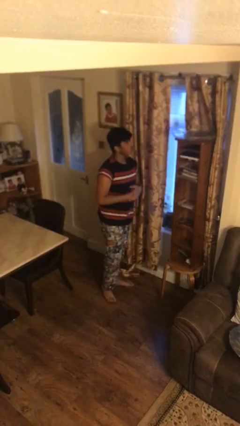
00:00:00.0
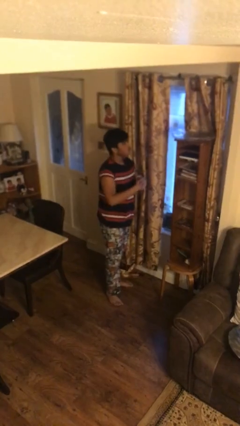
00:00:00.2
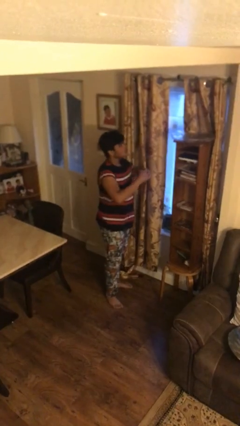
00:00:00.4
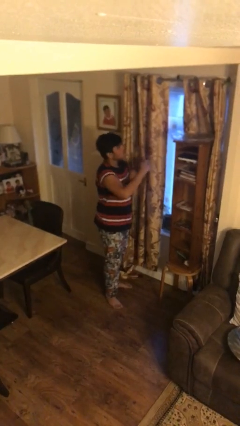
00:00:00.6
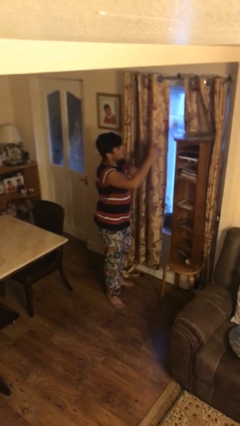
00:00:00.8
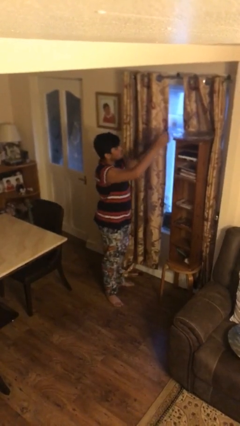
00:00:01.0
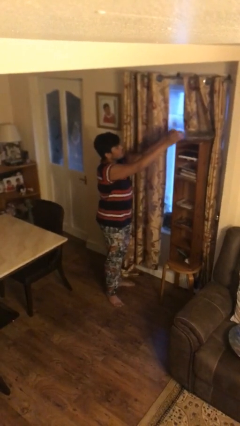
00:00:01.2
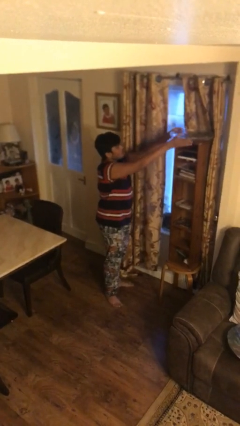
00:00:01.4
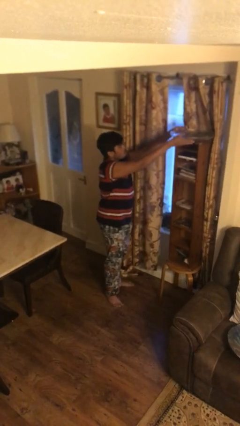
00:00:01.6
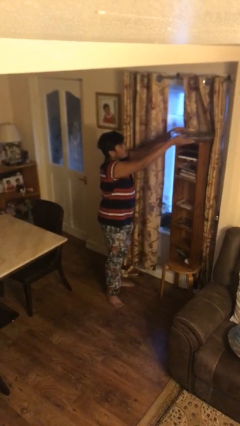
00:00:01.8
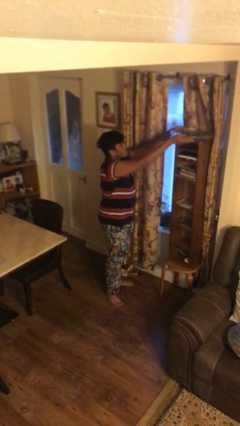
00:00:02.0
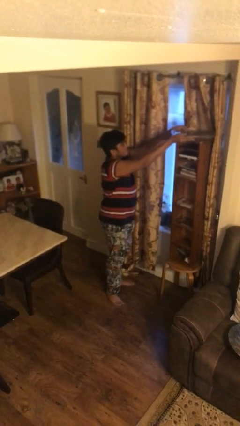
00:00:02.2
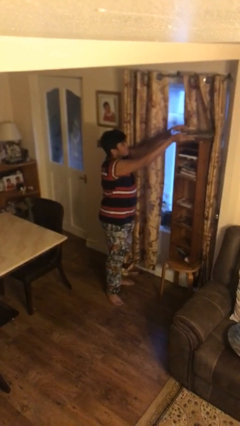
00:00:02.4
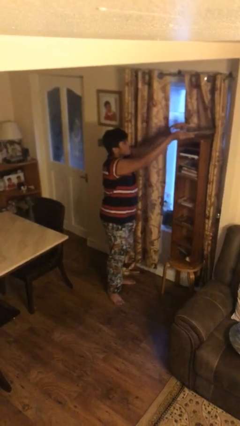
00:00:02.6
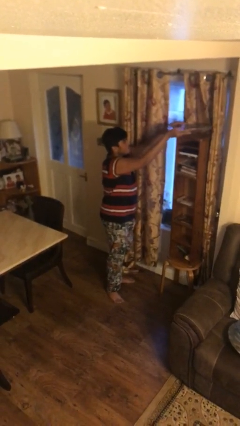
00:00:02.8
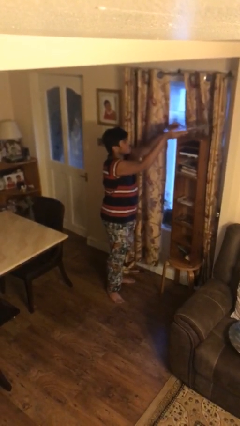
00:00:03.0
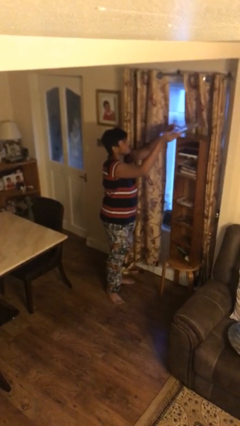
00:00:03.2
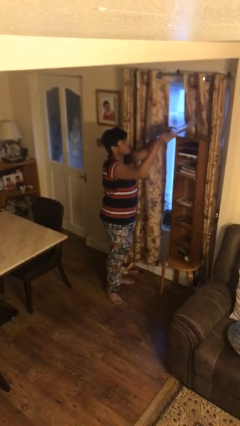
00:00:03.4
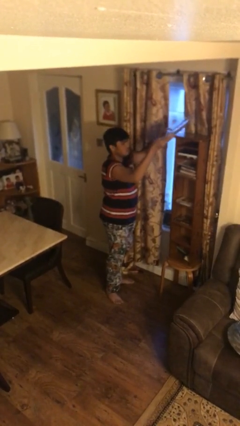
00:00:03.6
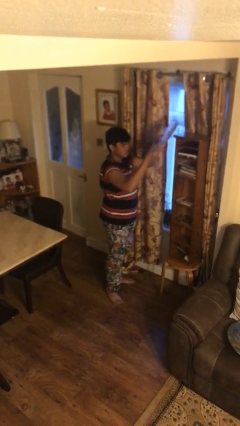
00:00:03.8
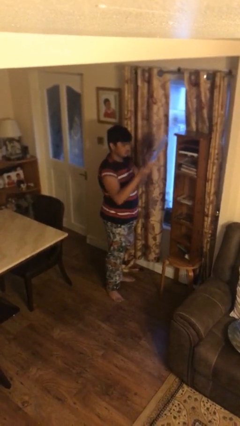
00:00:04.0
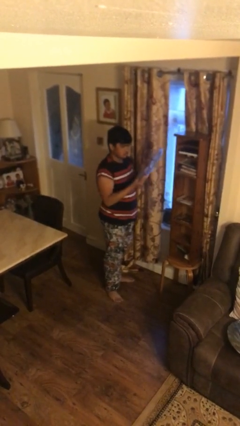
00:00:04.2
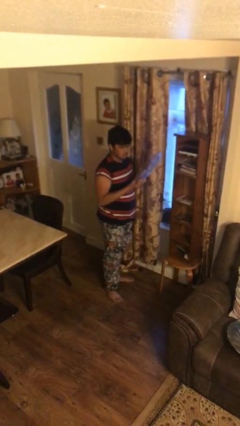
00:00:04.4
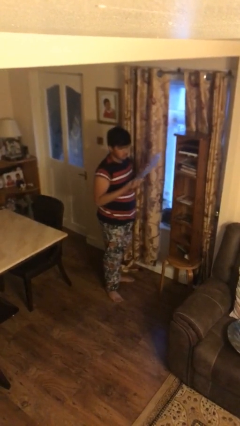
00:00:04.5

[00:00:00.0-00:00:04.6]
person picks up object from shelf

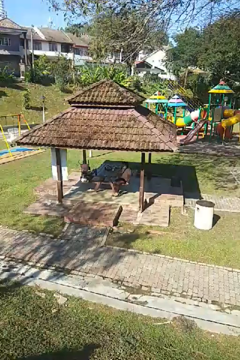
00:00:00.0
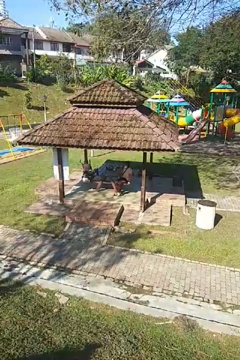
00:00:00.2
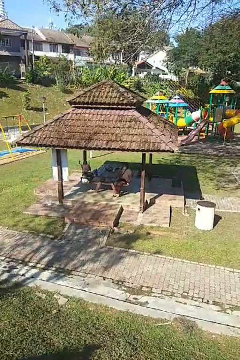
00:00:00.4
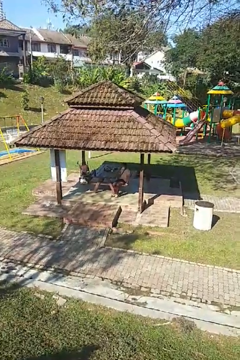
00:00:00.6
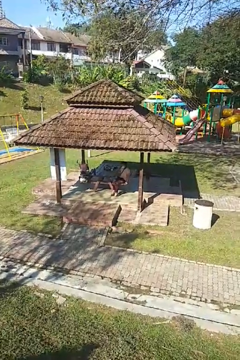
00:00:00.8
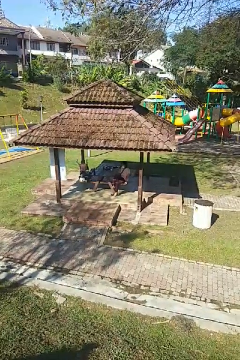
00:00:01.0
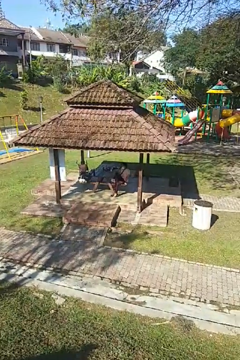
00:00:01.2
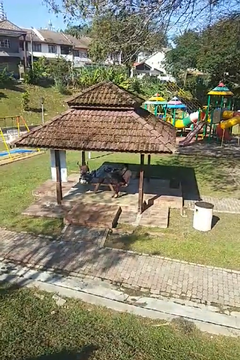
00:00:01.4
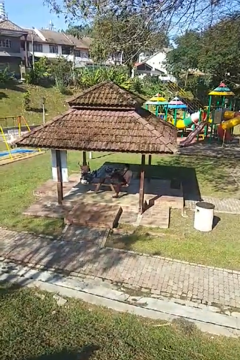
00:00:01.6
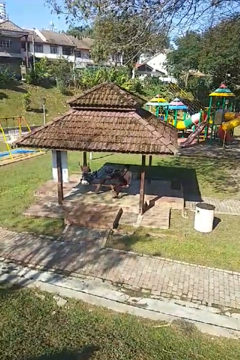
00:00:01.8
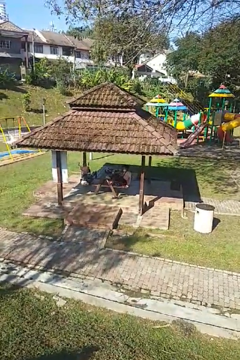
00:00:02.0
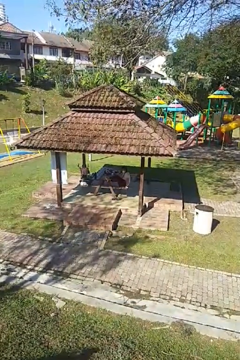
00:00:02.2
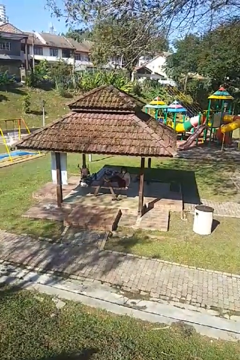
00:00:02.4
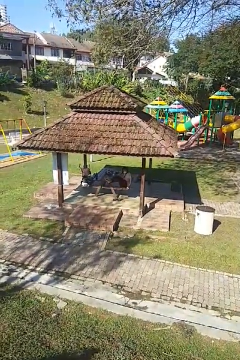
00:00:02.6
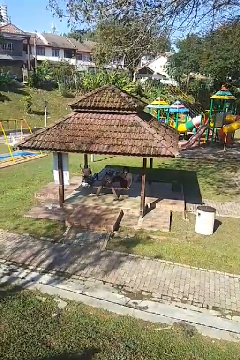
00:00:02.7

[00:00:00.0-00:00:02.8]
person puts feet up

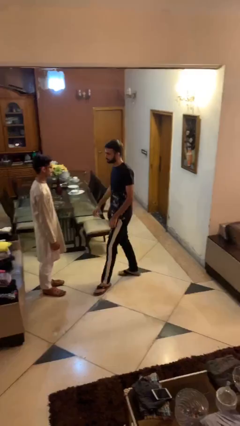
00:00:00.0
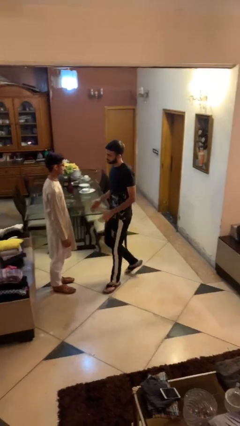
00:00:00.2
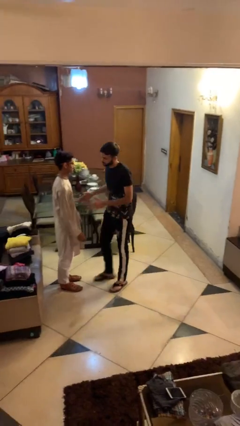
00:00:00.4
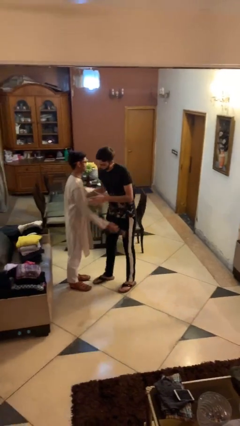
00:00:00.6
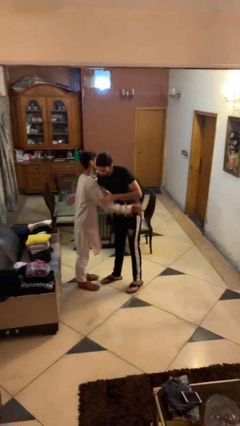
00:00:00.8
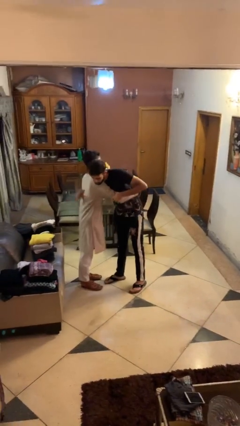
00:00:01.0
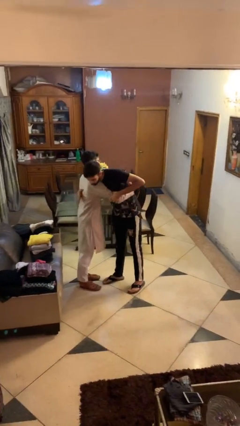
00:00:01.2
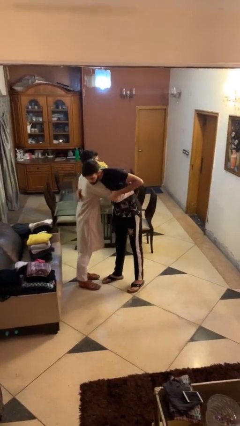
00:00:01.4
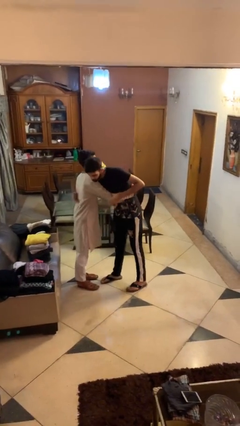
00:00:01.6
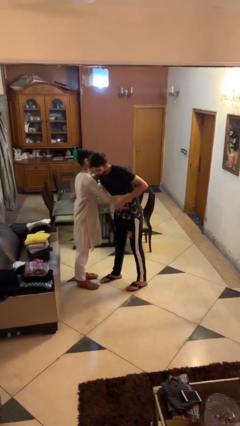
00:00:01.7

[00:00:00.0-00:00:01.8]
person embraces person

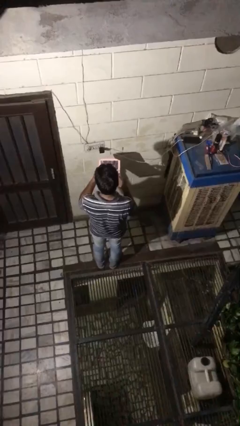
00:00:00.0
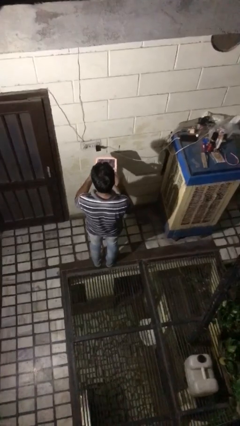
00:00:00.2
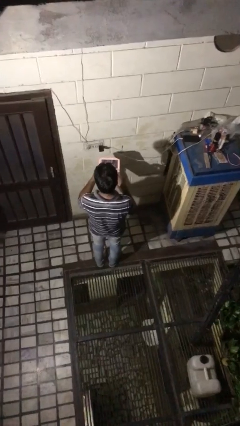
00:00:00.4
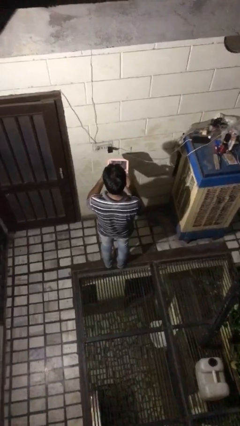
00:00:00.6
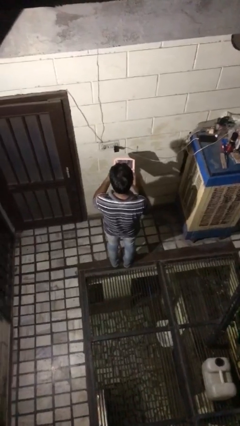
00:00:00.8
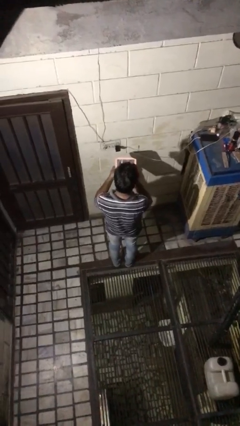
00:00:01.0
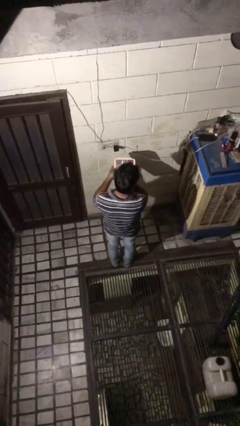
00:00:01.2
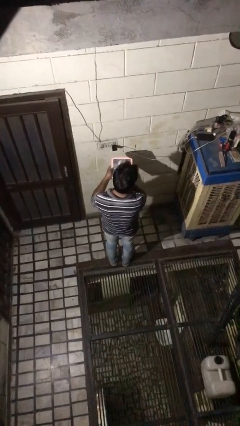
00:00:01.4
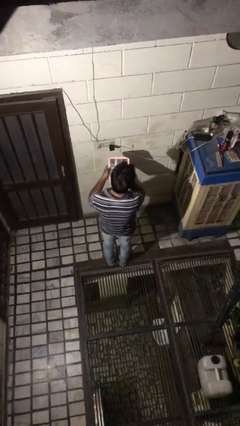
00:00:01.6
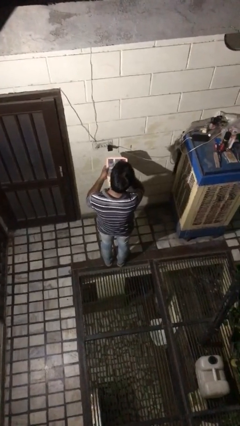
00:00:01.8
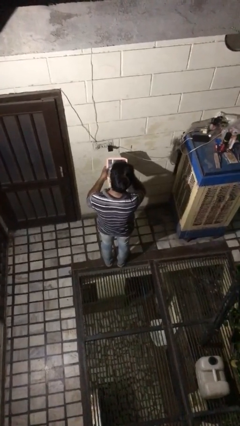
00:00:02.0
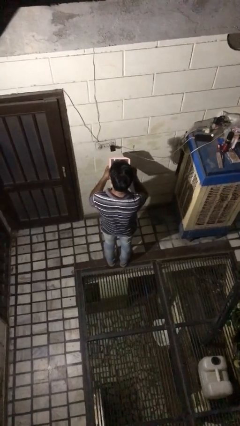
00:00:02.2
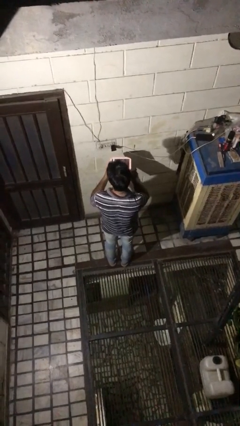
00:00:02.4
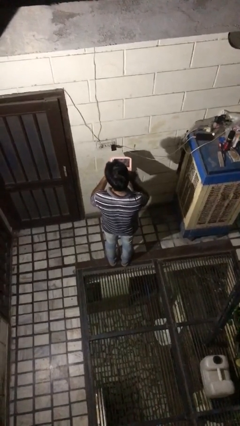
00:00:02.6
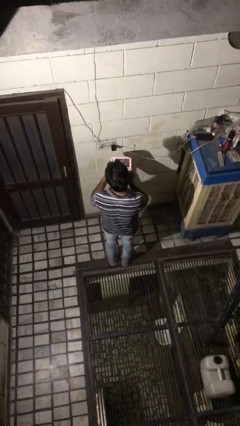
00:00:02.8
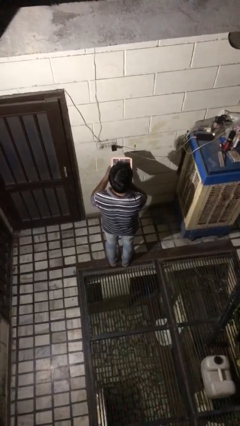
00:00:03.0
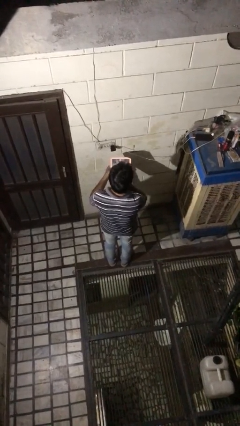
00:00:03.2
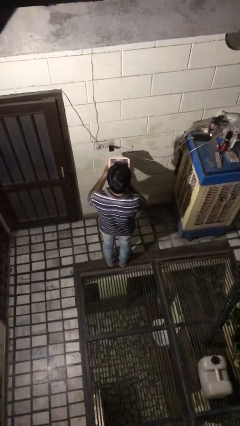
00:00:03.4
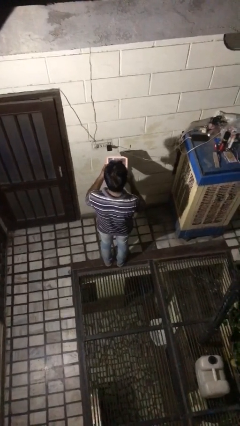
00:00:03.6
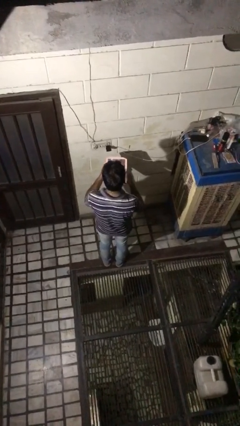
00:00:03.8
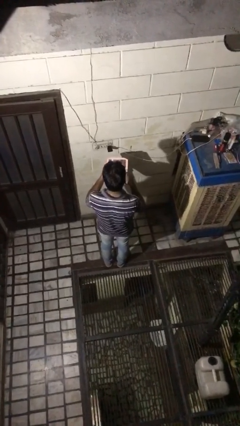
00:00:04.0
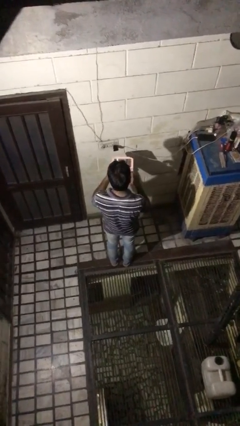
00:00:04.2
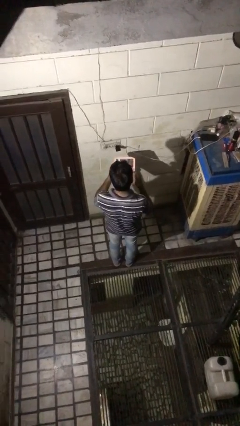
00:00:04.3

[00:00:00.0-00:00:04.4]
person applies foundation makeup

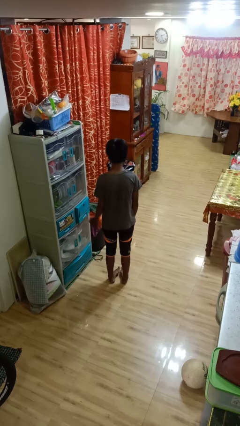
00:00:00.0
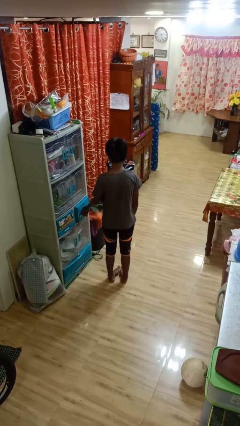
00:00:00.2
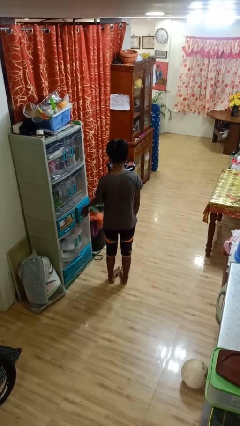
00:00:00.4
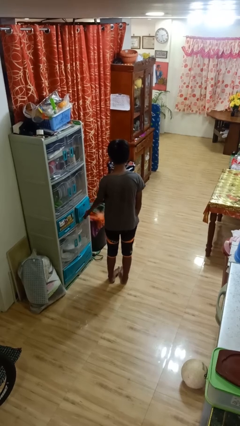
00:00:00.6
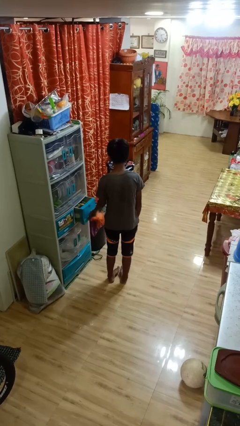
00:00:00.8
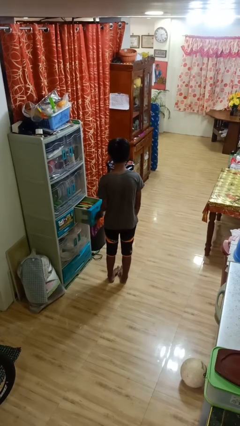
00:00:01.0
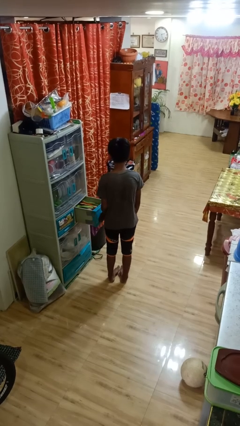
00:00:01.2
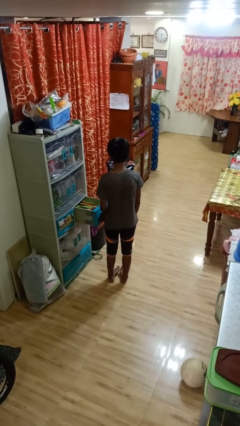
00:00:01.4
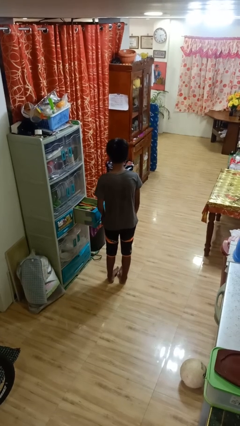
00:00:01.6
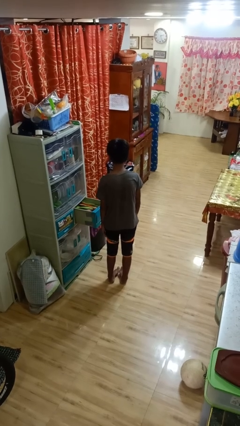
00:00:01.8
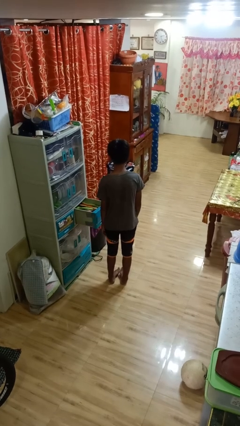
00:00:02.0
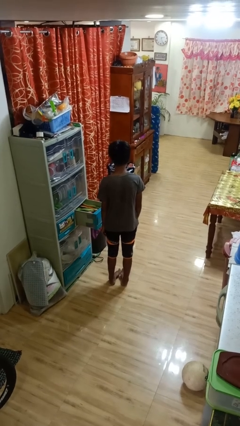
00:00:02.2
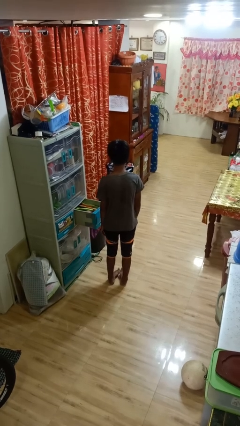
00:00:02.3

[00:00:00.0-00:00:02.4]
person opens kitchen drawer

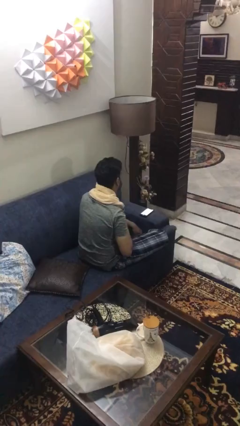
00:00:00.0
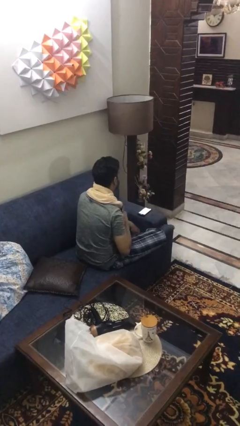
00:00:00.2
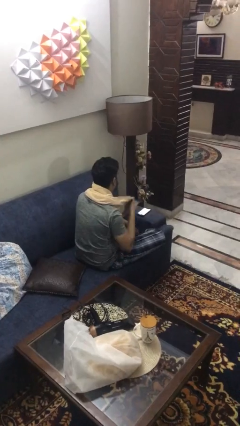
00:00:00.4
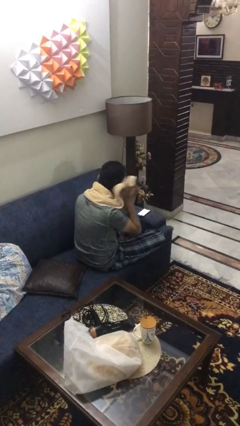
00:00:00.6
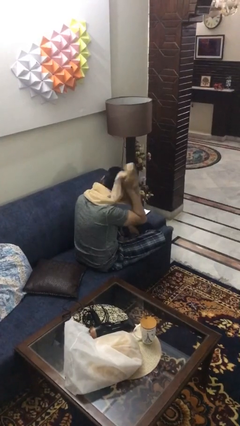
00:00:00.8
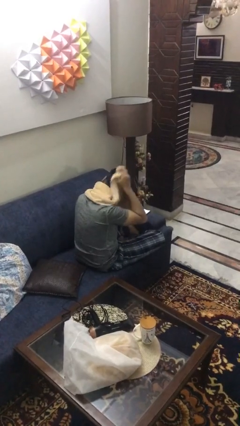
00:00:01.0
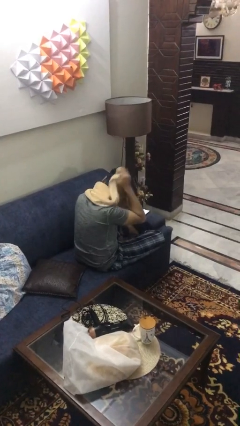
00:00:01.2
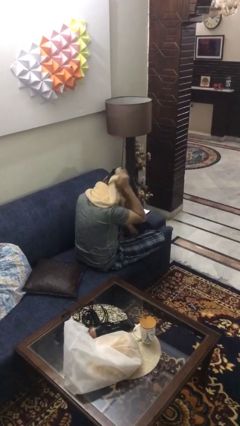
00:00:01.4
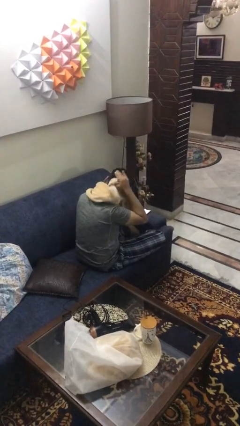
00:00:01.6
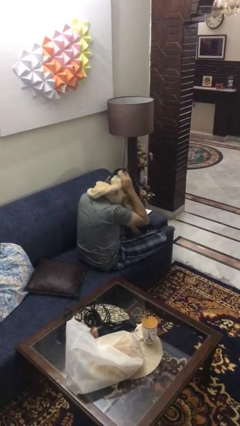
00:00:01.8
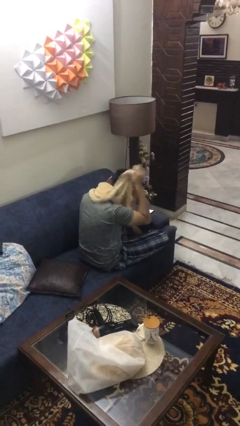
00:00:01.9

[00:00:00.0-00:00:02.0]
person dries hair with towel
